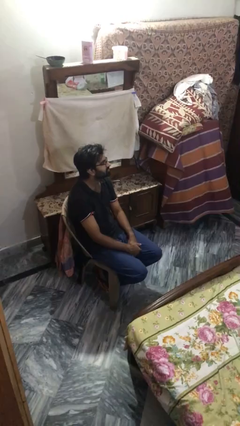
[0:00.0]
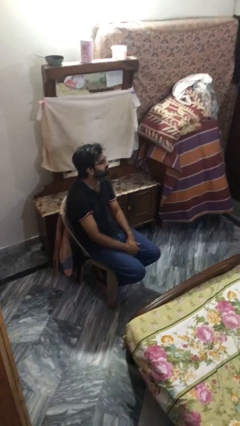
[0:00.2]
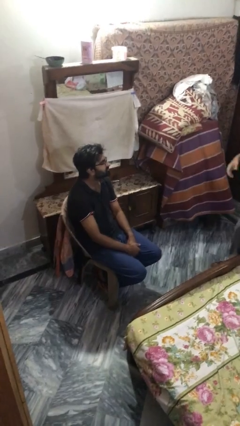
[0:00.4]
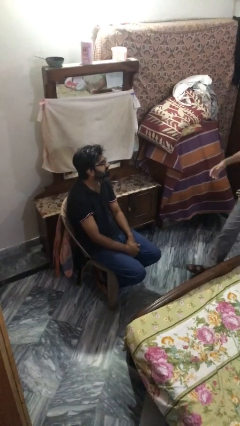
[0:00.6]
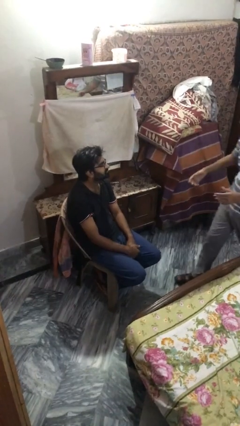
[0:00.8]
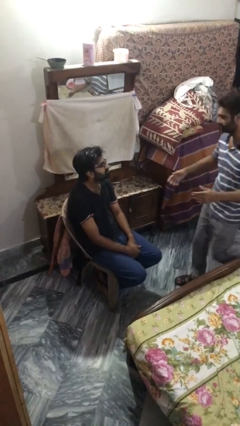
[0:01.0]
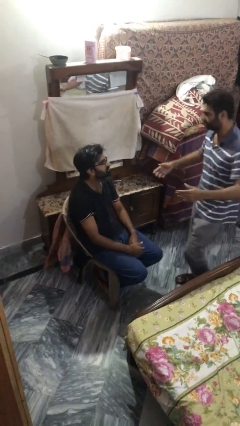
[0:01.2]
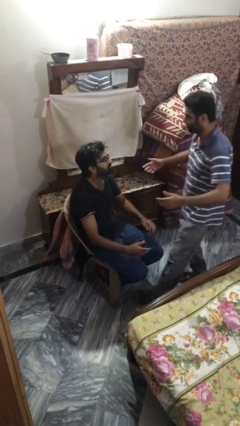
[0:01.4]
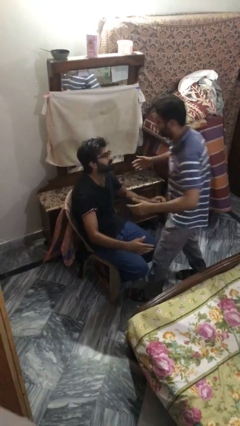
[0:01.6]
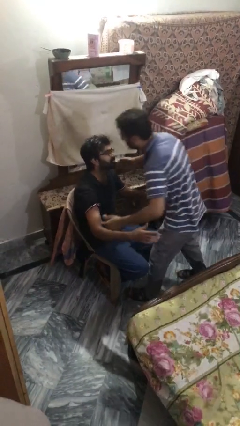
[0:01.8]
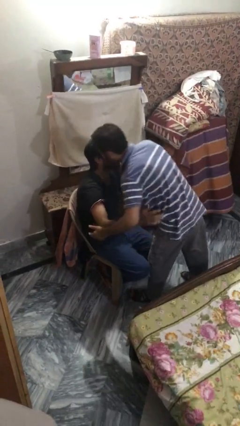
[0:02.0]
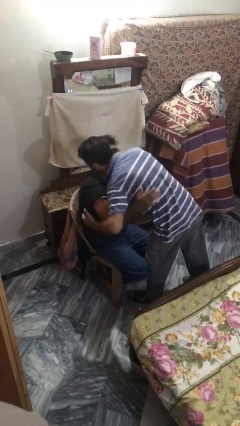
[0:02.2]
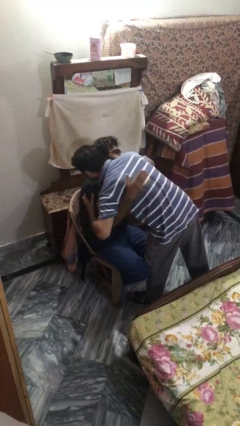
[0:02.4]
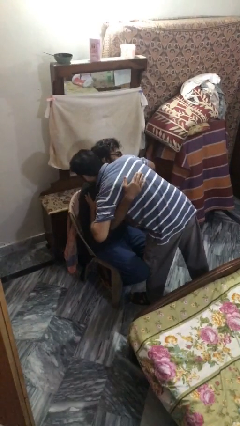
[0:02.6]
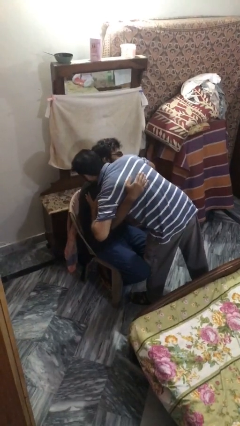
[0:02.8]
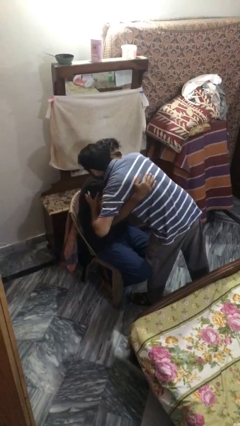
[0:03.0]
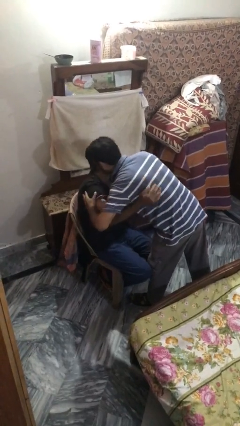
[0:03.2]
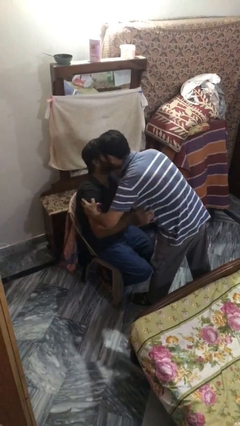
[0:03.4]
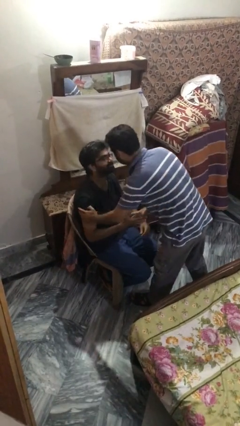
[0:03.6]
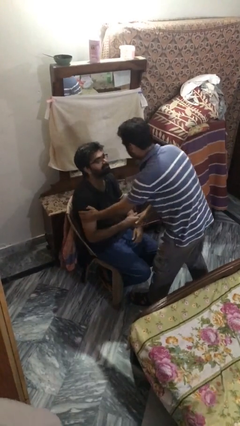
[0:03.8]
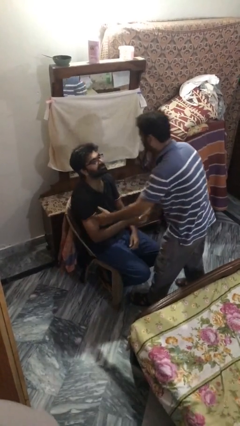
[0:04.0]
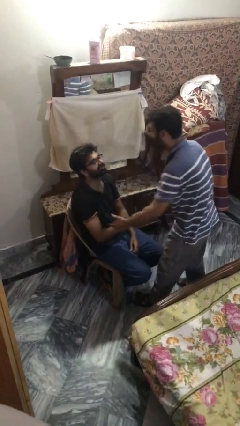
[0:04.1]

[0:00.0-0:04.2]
person embraces person

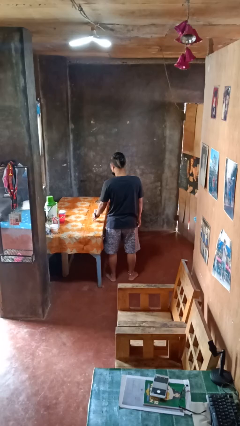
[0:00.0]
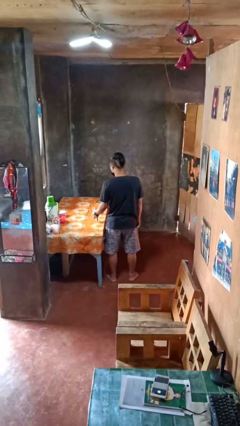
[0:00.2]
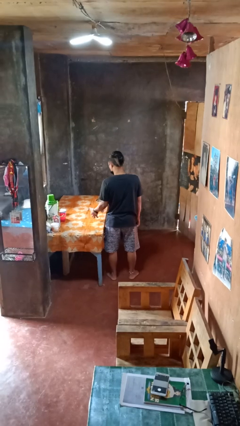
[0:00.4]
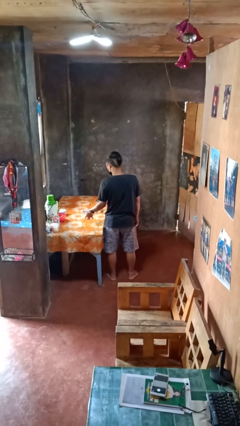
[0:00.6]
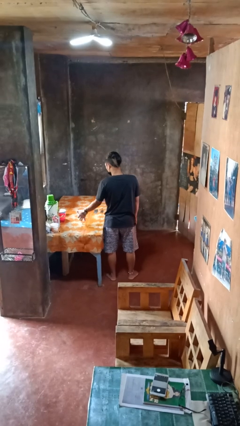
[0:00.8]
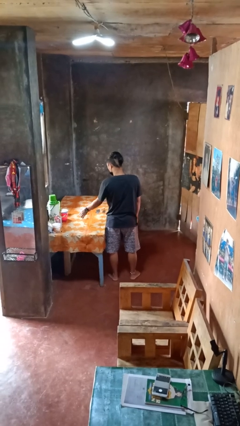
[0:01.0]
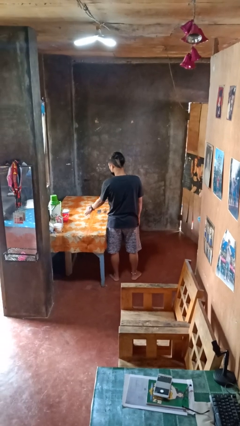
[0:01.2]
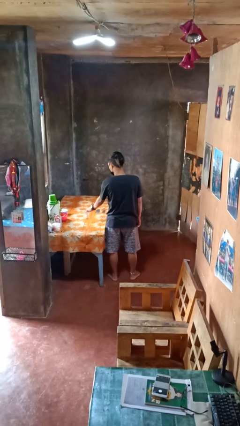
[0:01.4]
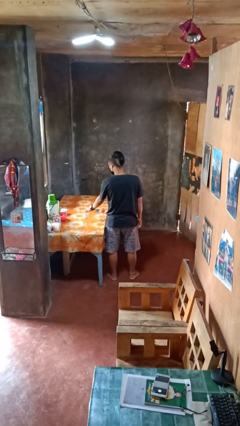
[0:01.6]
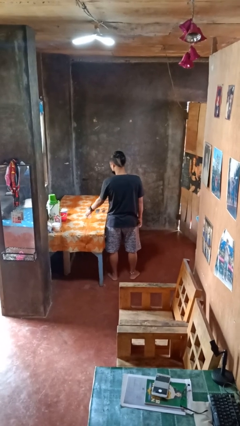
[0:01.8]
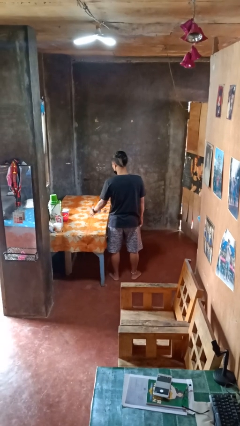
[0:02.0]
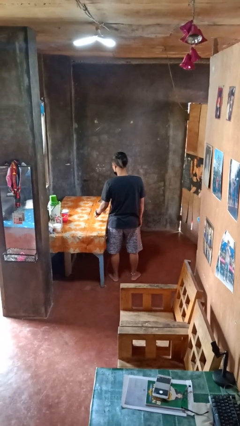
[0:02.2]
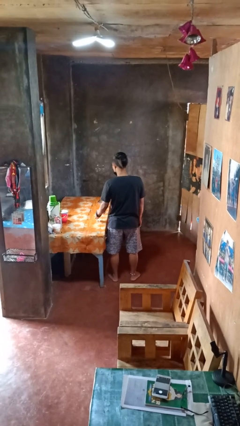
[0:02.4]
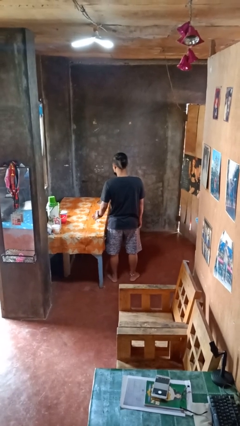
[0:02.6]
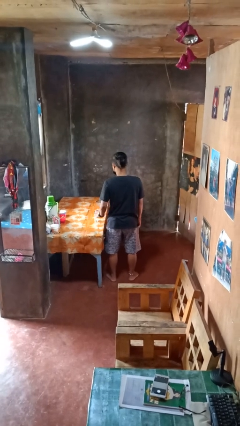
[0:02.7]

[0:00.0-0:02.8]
person sprays from bottle

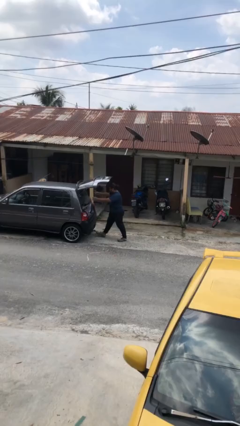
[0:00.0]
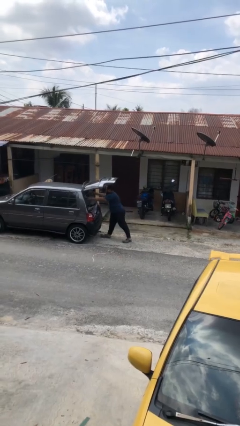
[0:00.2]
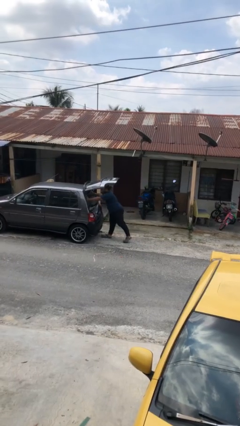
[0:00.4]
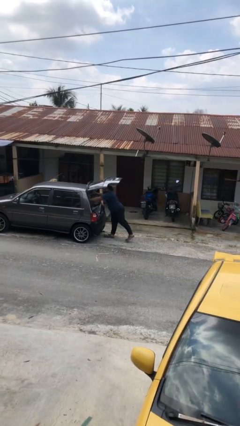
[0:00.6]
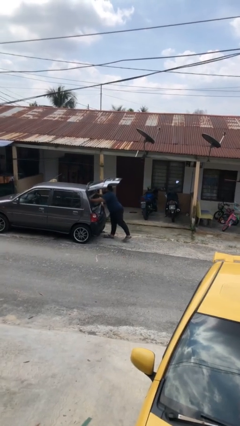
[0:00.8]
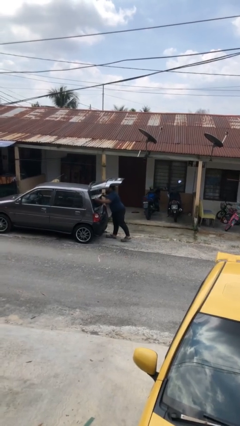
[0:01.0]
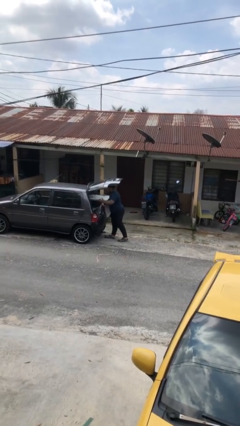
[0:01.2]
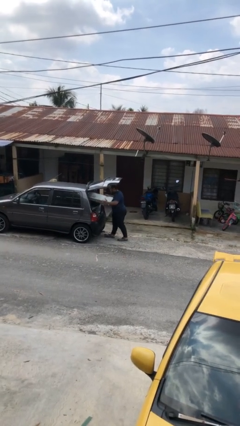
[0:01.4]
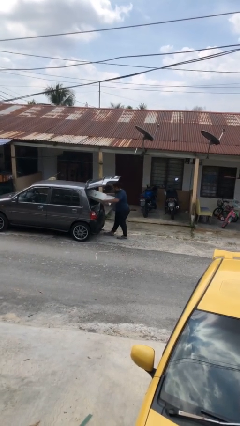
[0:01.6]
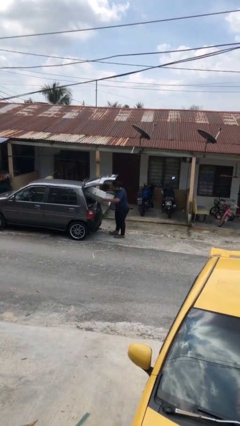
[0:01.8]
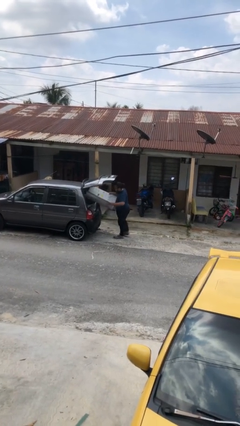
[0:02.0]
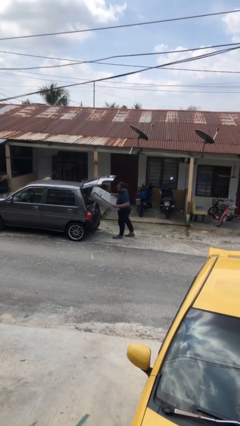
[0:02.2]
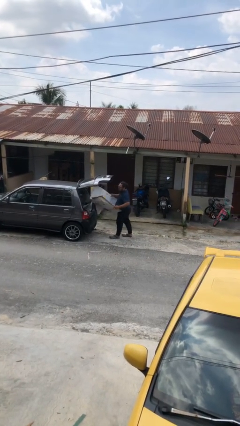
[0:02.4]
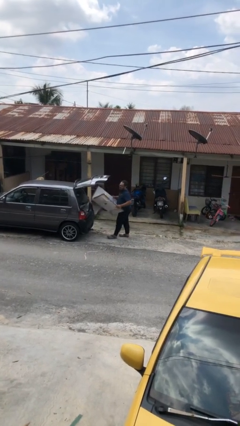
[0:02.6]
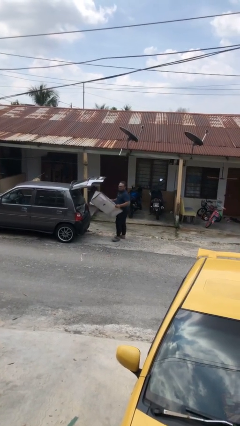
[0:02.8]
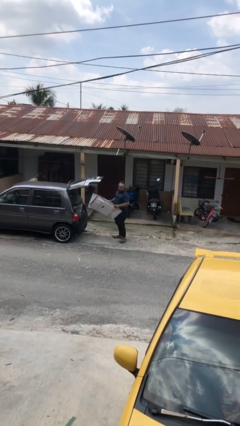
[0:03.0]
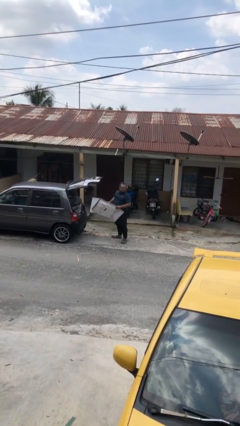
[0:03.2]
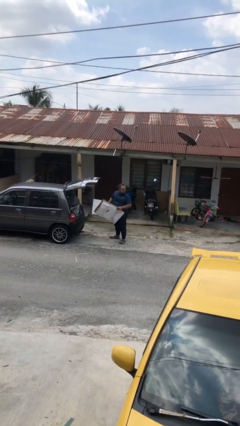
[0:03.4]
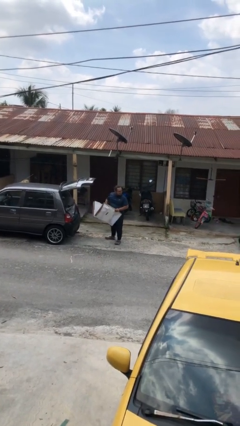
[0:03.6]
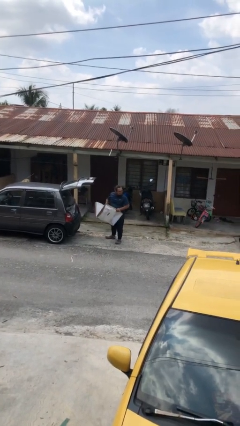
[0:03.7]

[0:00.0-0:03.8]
person unloads car

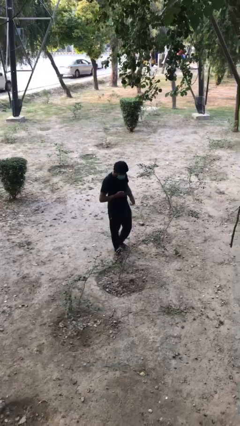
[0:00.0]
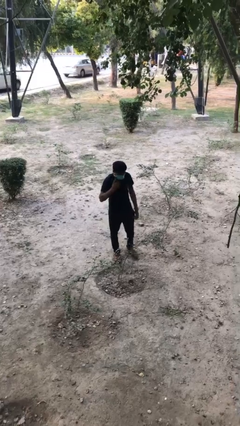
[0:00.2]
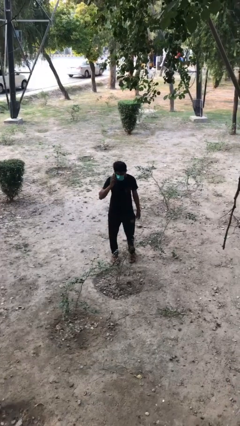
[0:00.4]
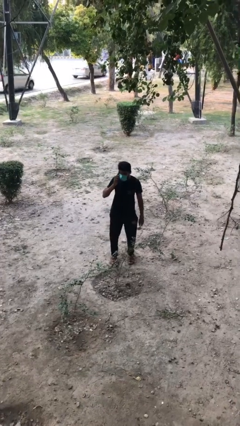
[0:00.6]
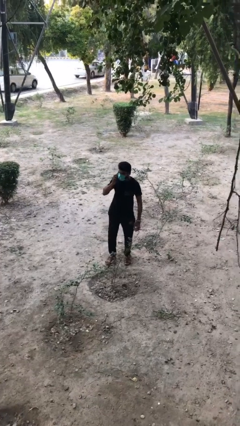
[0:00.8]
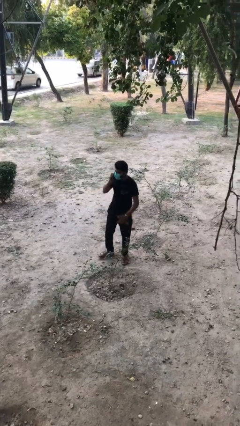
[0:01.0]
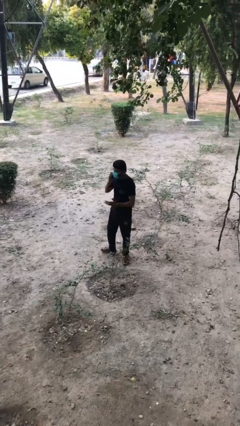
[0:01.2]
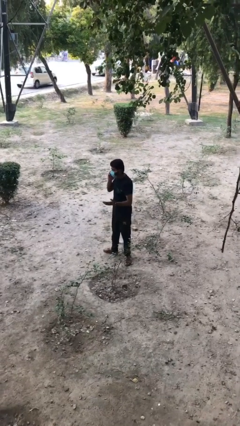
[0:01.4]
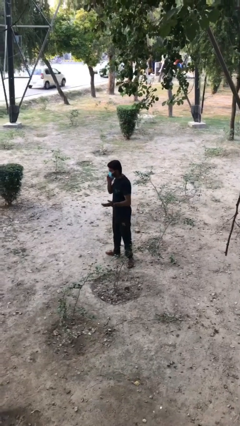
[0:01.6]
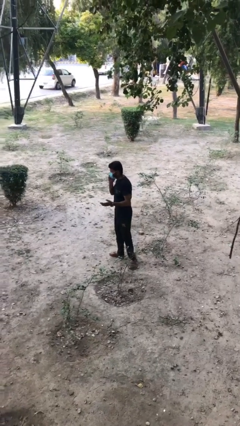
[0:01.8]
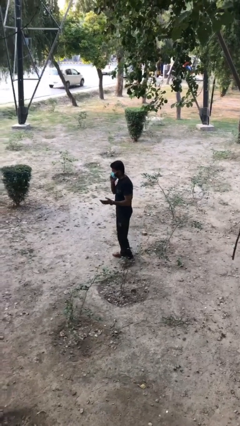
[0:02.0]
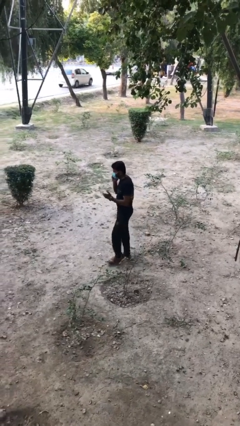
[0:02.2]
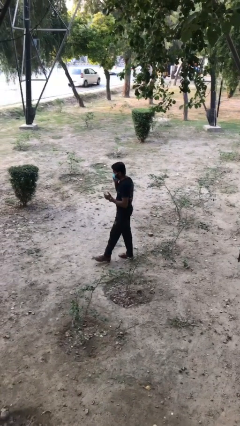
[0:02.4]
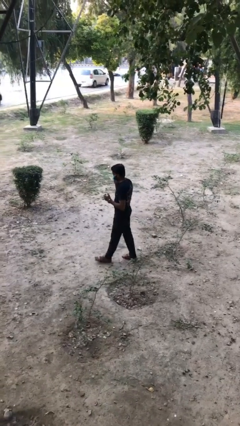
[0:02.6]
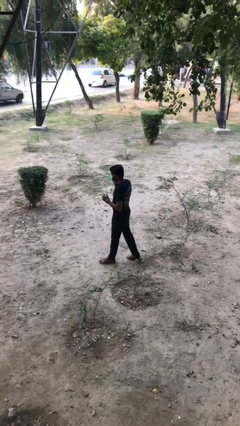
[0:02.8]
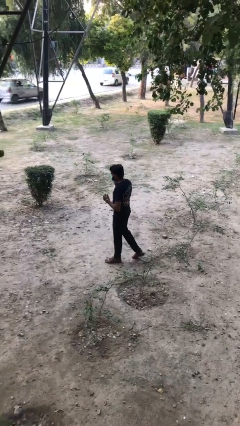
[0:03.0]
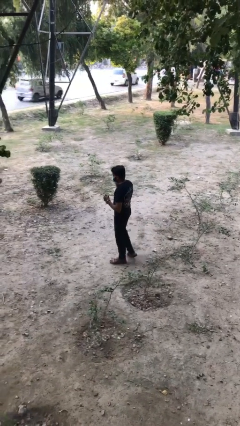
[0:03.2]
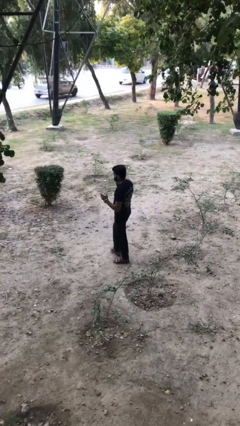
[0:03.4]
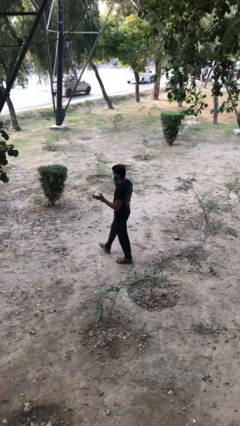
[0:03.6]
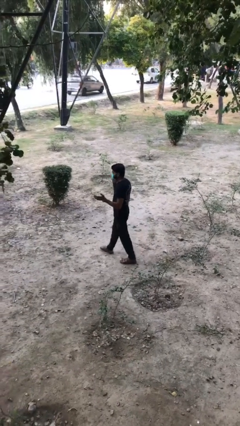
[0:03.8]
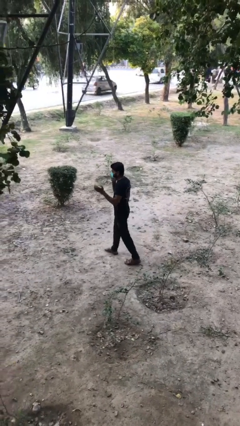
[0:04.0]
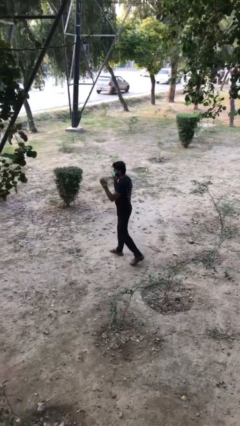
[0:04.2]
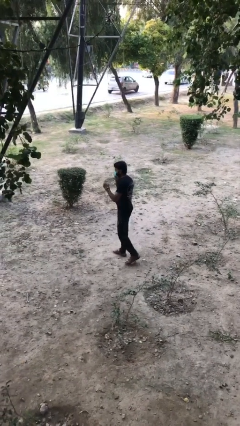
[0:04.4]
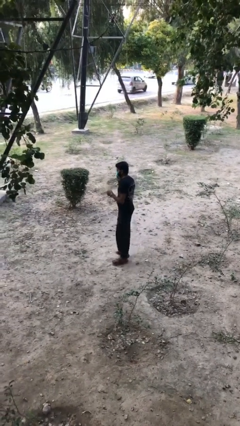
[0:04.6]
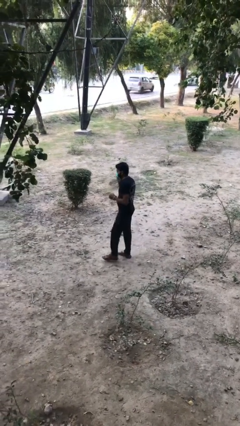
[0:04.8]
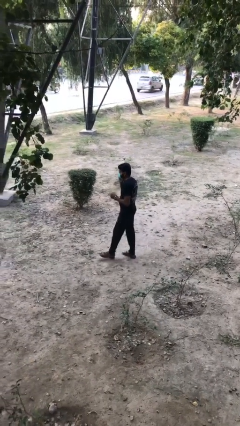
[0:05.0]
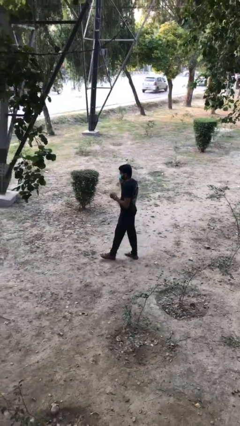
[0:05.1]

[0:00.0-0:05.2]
person talks on phone

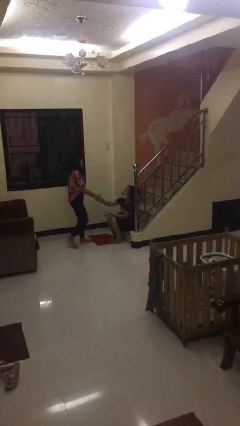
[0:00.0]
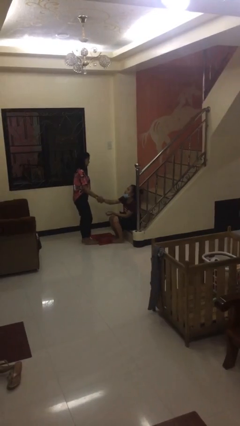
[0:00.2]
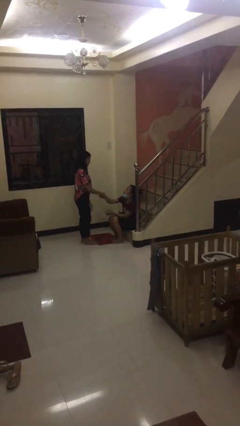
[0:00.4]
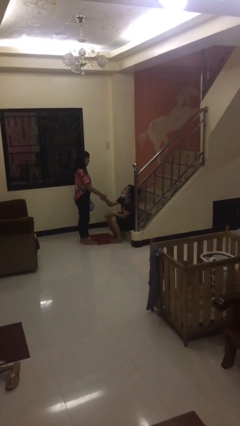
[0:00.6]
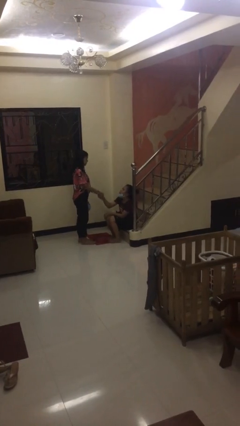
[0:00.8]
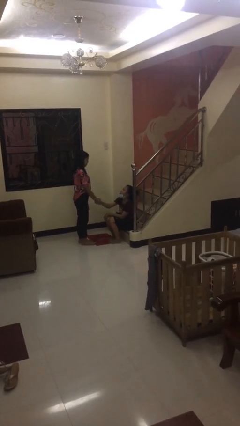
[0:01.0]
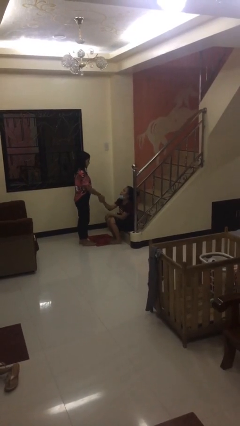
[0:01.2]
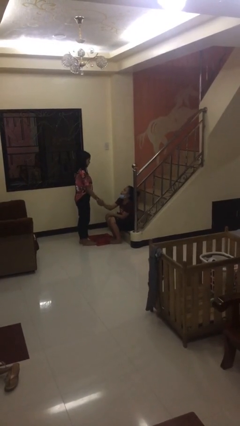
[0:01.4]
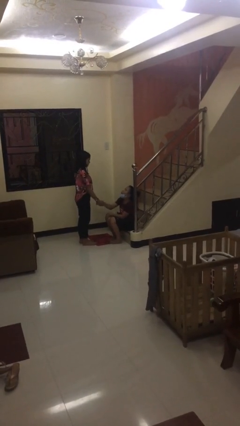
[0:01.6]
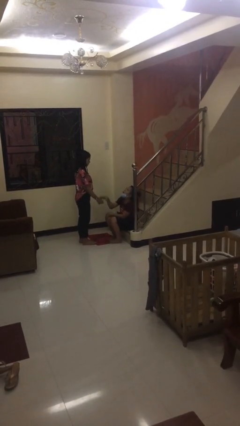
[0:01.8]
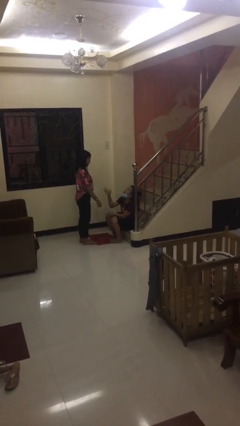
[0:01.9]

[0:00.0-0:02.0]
person shakes hand
